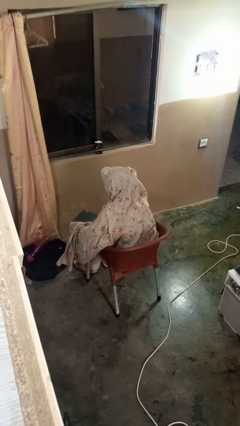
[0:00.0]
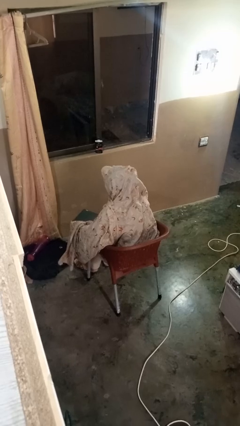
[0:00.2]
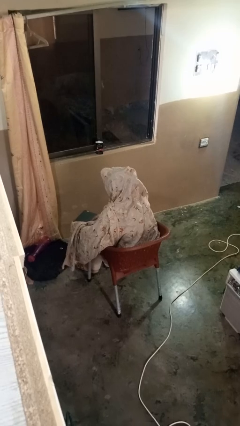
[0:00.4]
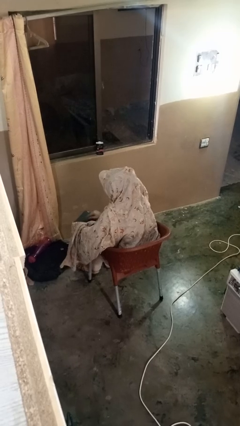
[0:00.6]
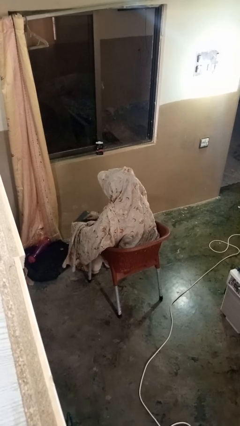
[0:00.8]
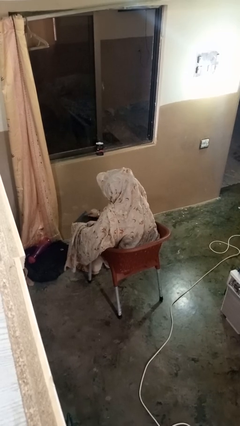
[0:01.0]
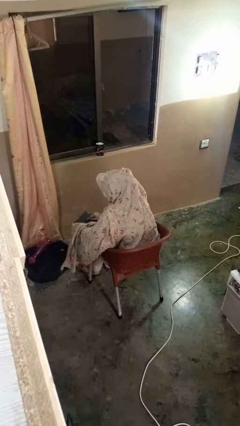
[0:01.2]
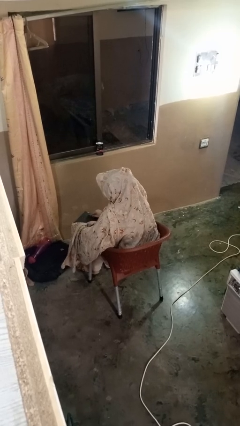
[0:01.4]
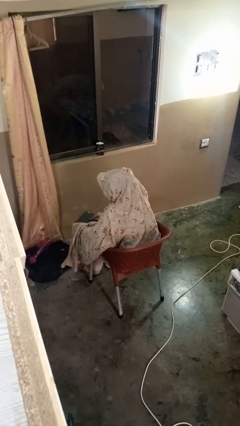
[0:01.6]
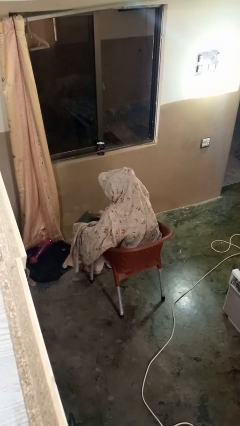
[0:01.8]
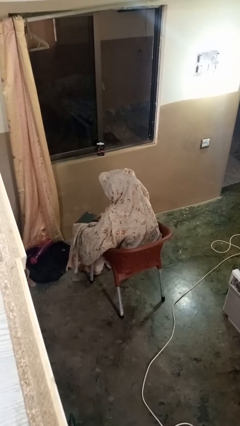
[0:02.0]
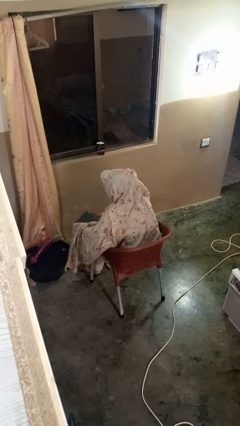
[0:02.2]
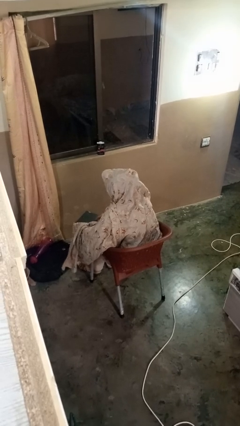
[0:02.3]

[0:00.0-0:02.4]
person interacts with tablet

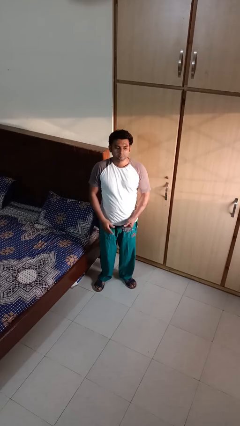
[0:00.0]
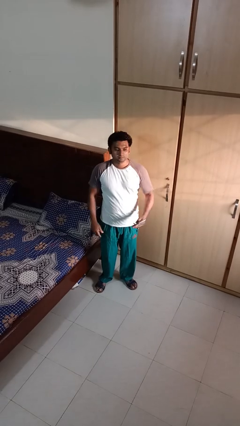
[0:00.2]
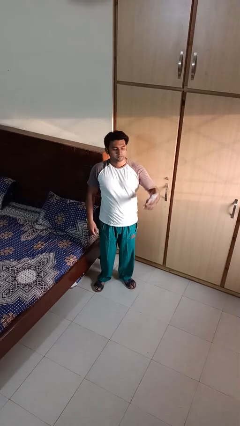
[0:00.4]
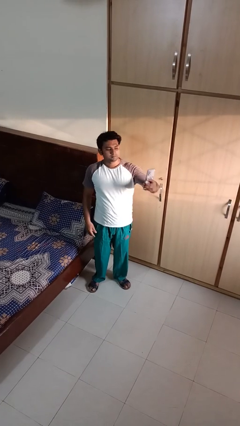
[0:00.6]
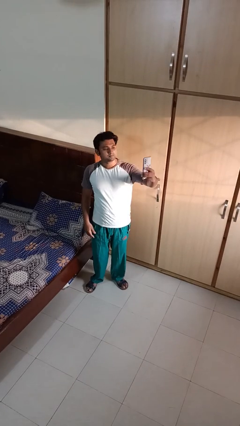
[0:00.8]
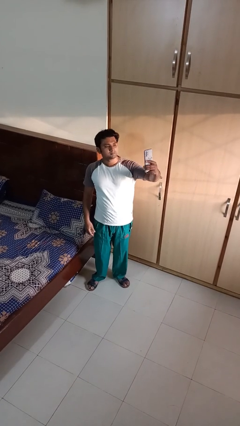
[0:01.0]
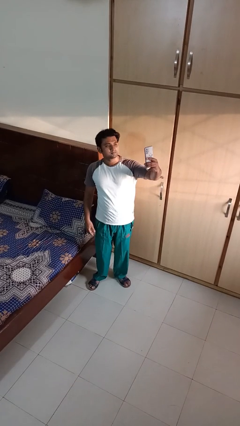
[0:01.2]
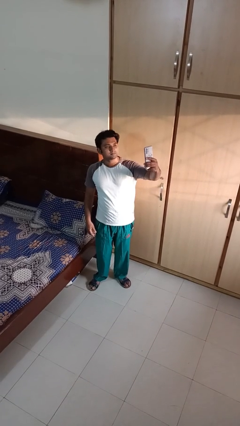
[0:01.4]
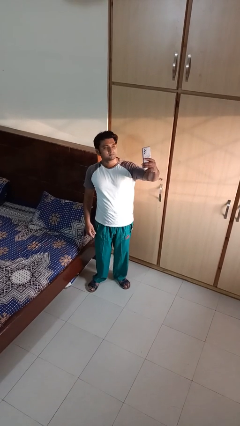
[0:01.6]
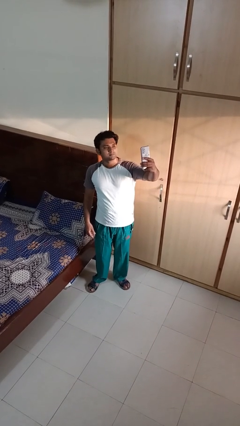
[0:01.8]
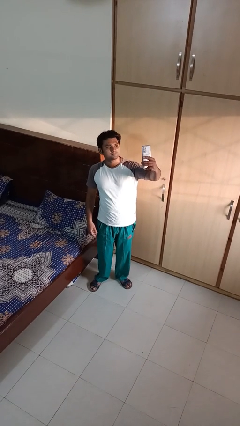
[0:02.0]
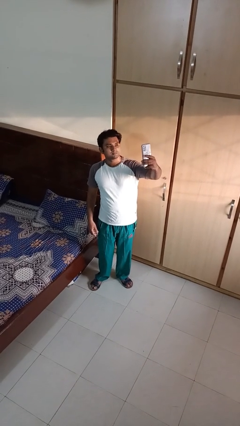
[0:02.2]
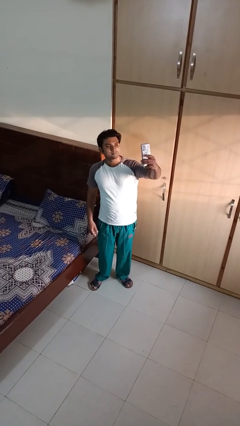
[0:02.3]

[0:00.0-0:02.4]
person takes selfie

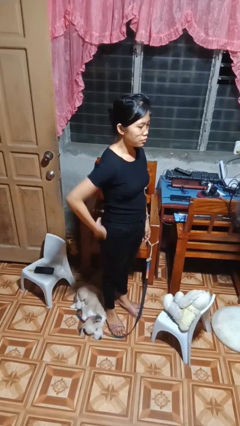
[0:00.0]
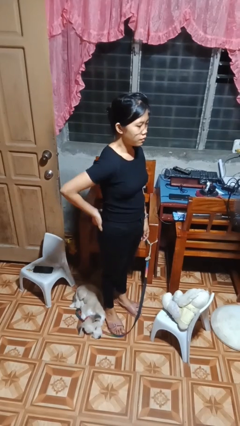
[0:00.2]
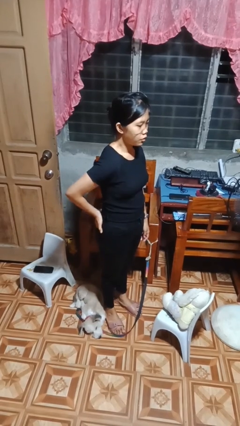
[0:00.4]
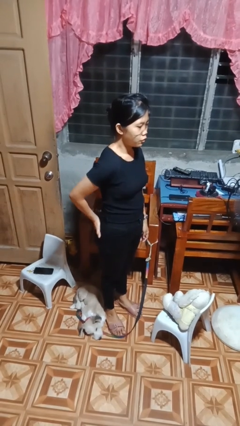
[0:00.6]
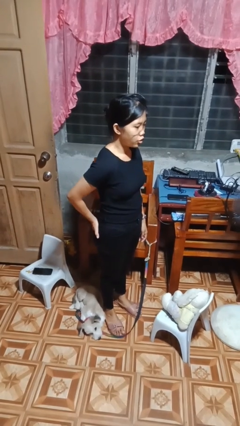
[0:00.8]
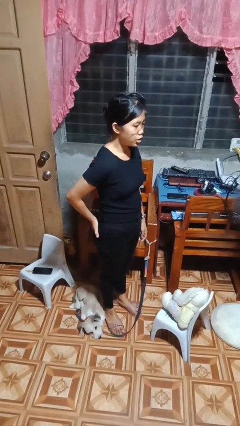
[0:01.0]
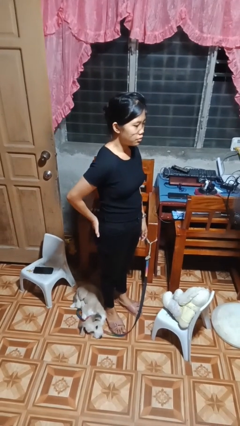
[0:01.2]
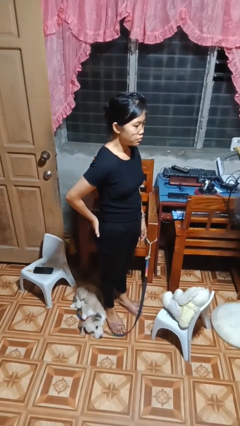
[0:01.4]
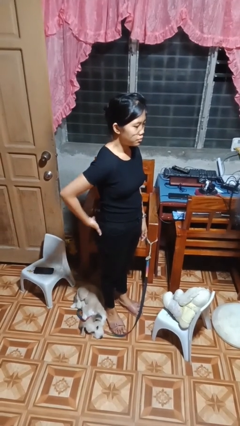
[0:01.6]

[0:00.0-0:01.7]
person puts hands in back pockets

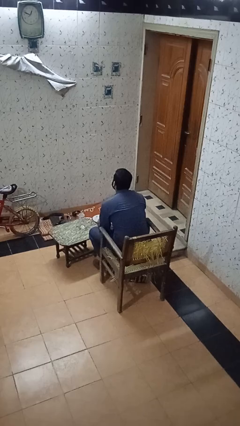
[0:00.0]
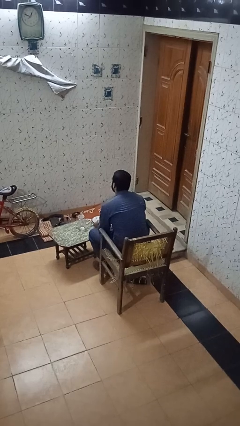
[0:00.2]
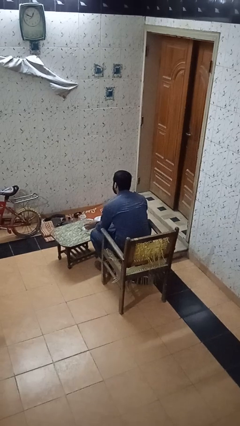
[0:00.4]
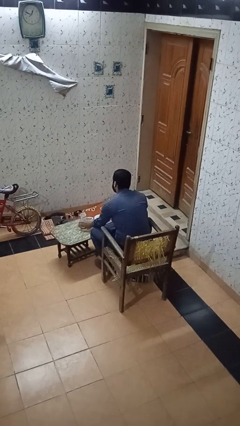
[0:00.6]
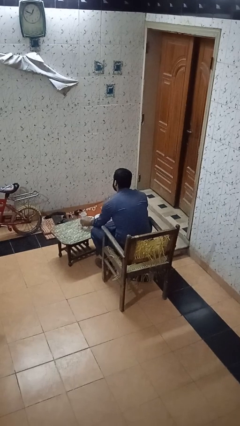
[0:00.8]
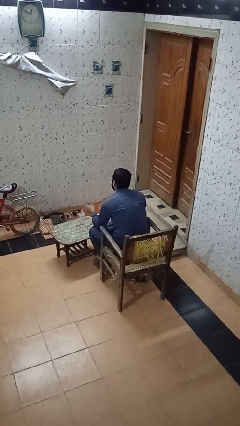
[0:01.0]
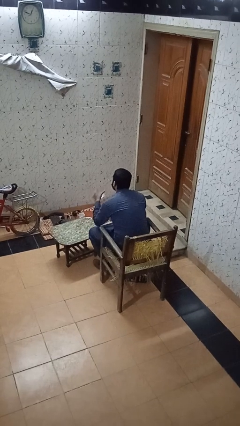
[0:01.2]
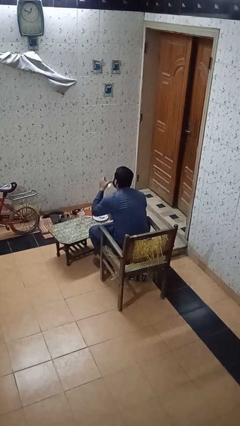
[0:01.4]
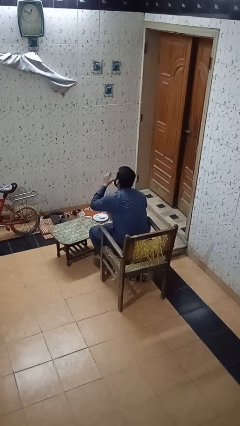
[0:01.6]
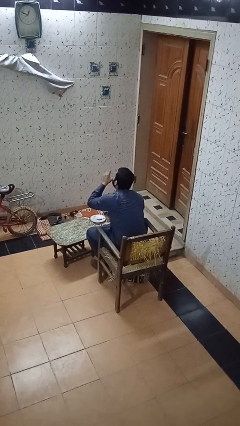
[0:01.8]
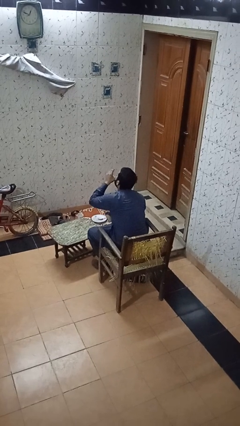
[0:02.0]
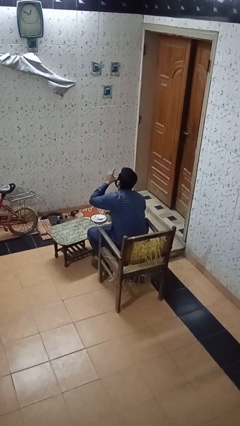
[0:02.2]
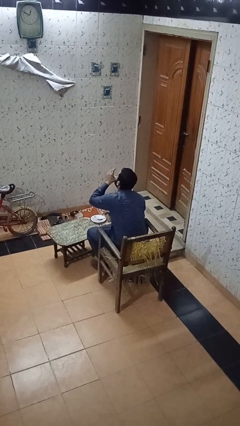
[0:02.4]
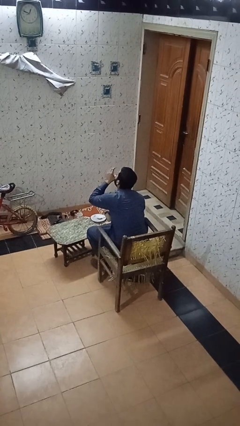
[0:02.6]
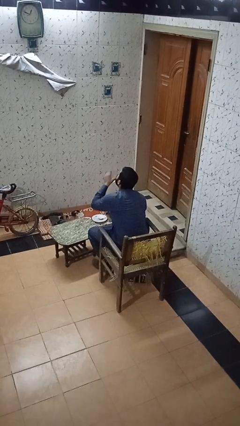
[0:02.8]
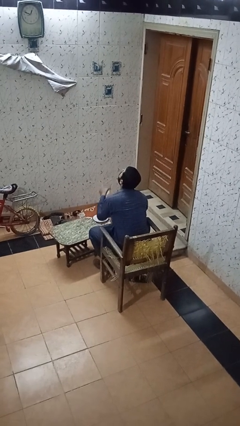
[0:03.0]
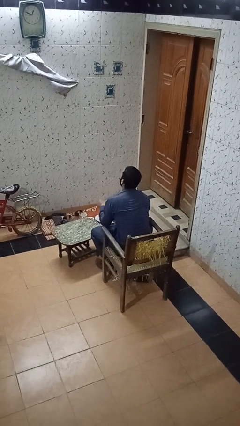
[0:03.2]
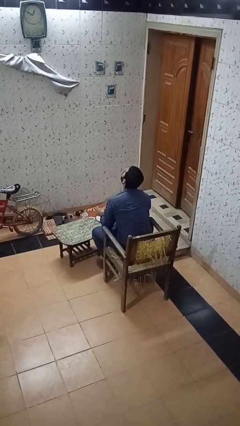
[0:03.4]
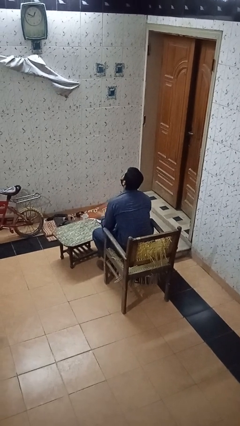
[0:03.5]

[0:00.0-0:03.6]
person drinks from cup

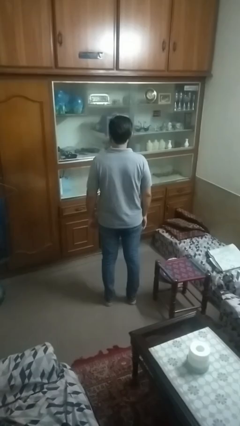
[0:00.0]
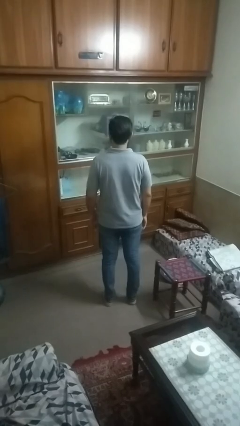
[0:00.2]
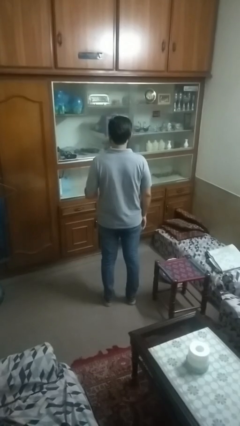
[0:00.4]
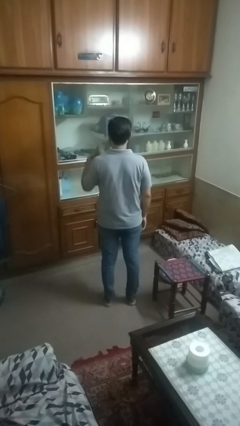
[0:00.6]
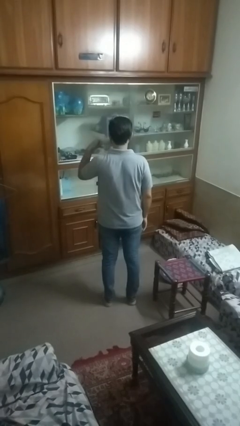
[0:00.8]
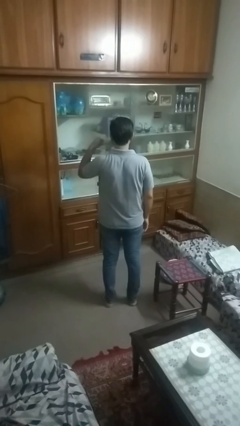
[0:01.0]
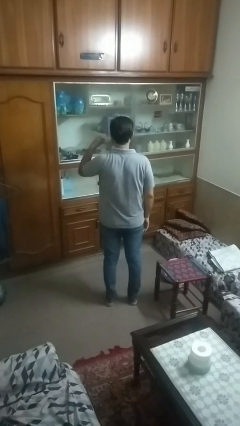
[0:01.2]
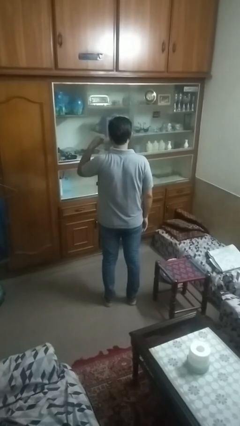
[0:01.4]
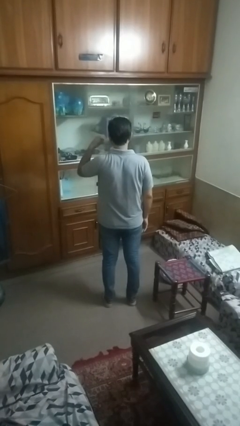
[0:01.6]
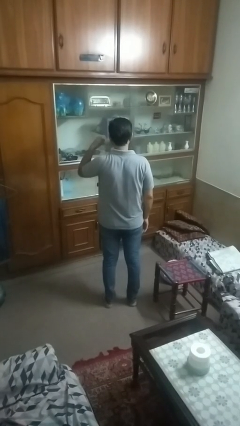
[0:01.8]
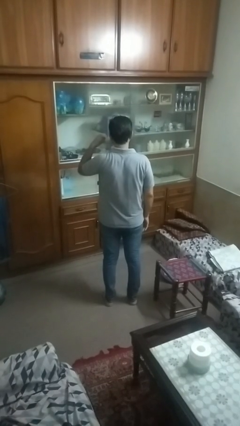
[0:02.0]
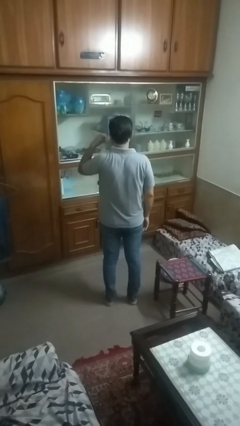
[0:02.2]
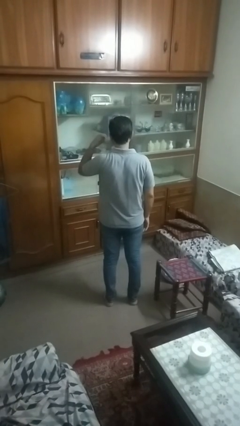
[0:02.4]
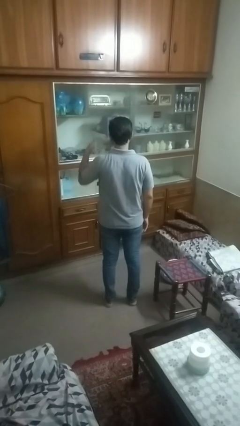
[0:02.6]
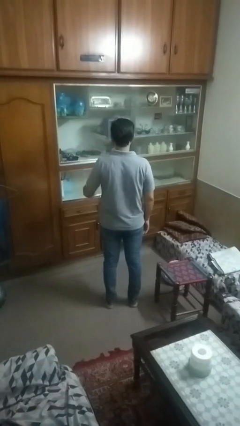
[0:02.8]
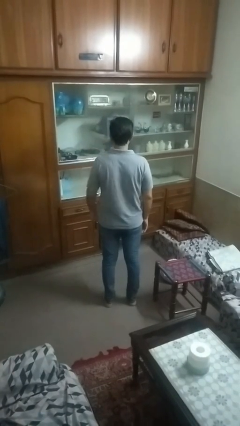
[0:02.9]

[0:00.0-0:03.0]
person gestures call me

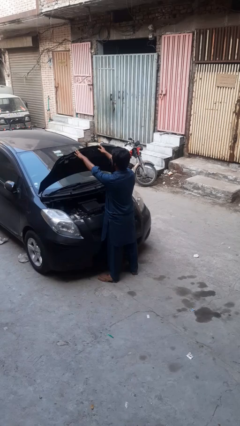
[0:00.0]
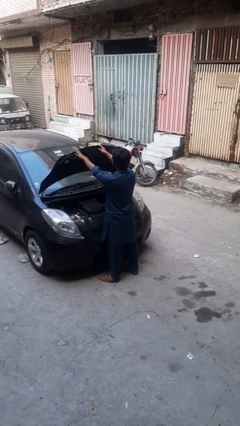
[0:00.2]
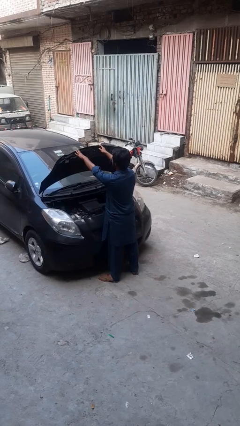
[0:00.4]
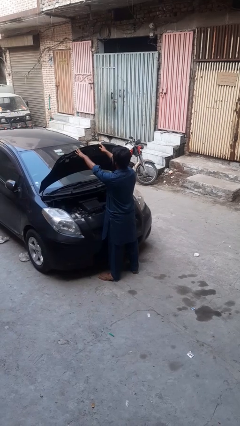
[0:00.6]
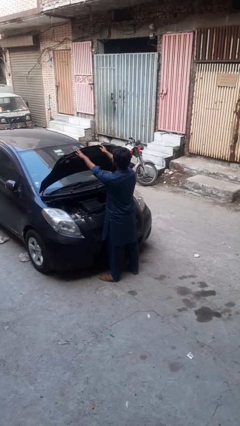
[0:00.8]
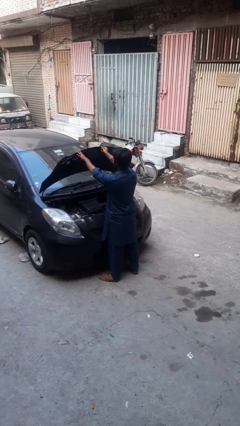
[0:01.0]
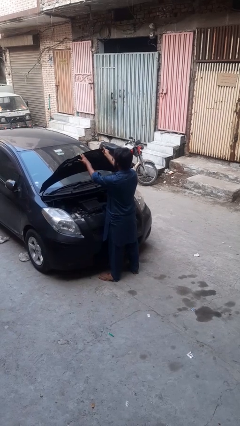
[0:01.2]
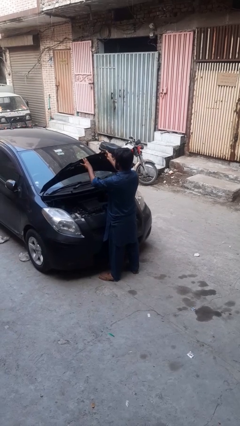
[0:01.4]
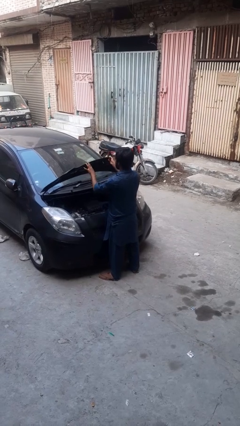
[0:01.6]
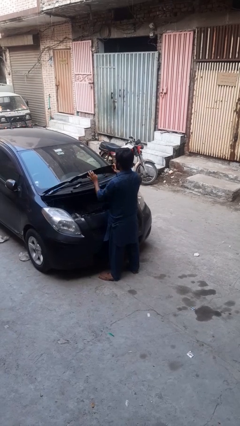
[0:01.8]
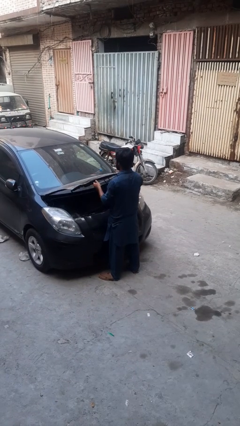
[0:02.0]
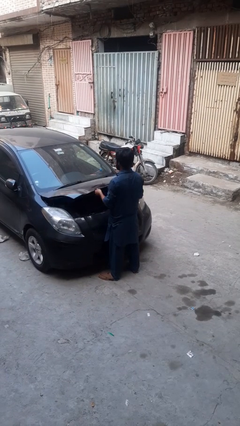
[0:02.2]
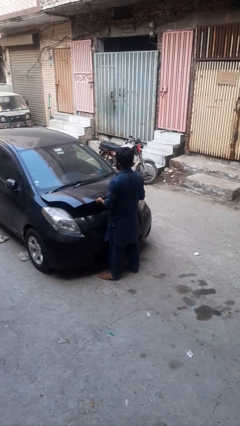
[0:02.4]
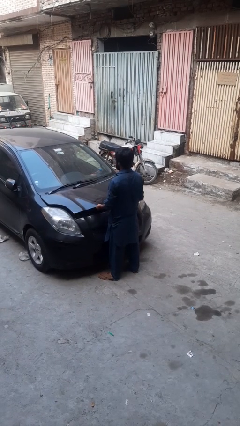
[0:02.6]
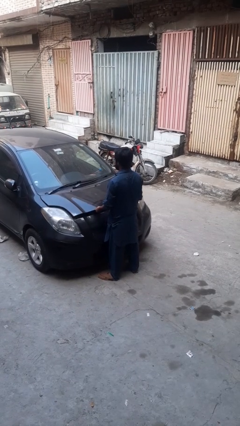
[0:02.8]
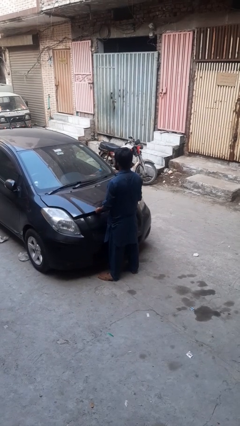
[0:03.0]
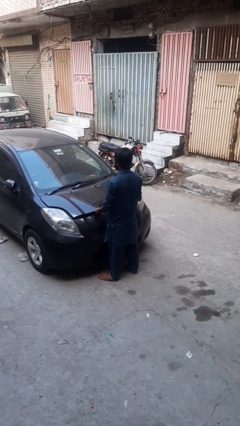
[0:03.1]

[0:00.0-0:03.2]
person closes car hood

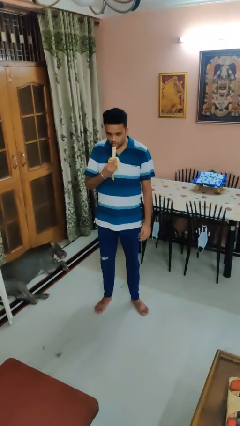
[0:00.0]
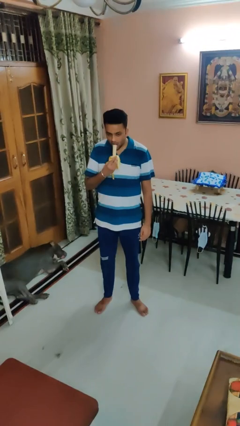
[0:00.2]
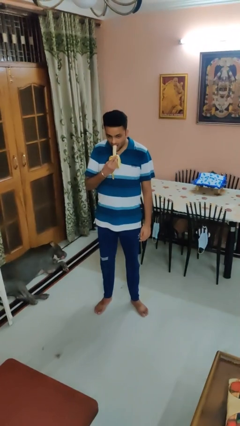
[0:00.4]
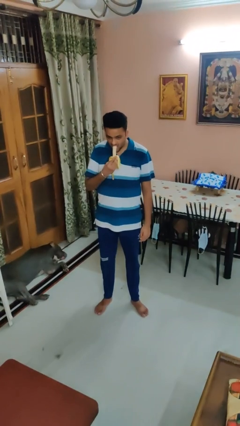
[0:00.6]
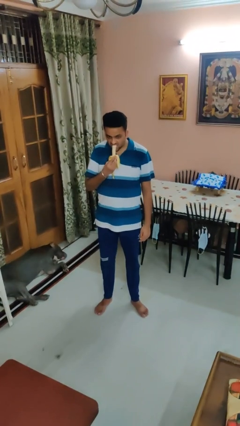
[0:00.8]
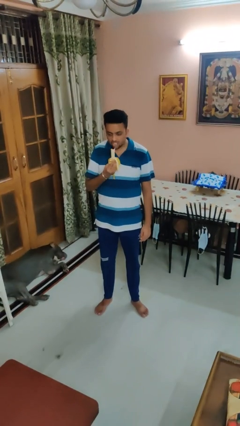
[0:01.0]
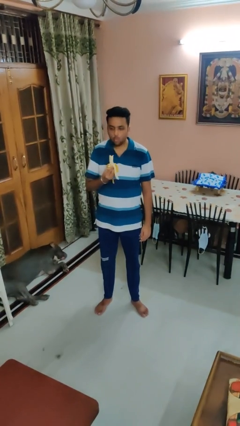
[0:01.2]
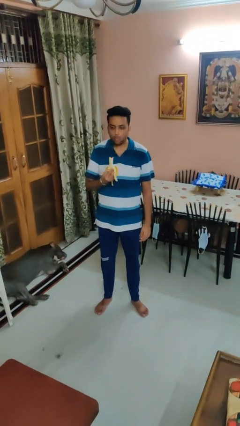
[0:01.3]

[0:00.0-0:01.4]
person eats banana
